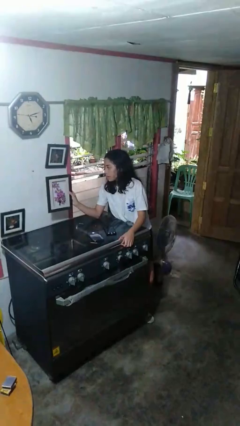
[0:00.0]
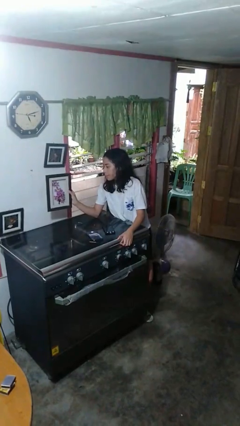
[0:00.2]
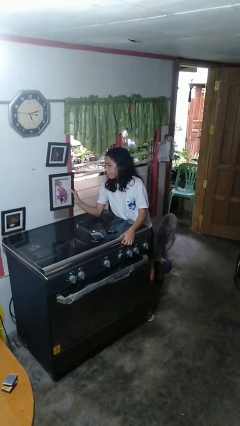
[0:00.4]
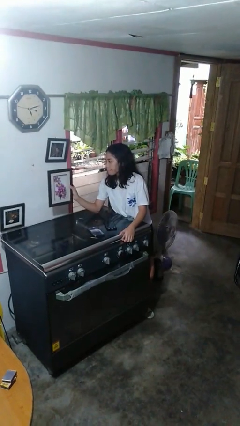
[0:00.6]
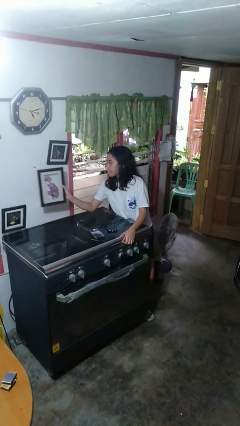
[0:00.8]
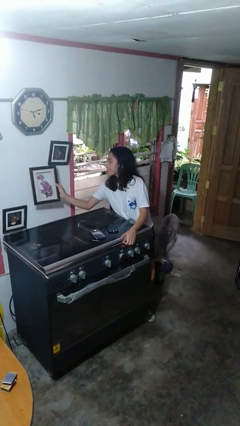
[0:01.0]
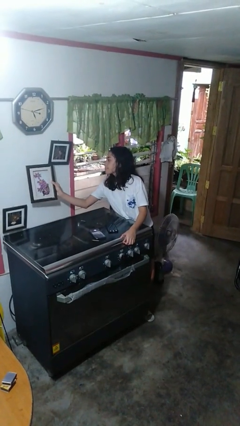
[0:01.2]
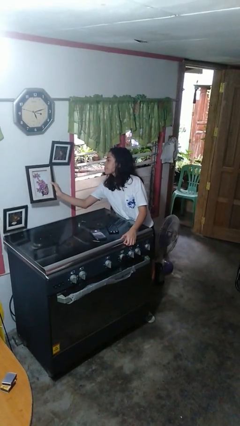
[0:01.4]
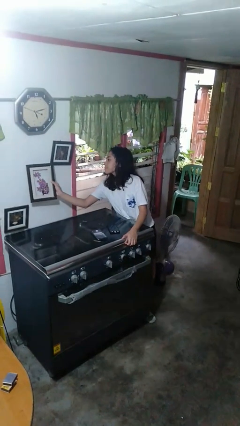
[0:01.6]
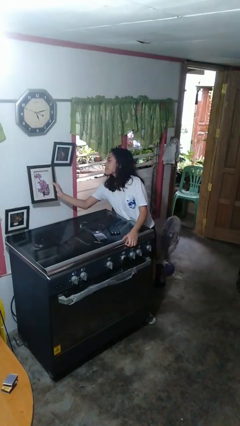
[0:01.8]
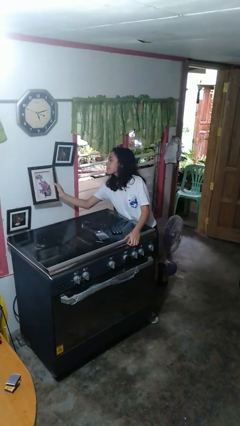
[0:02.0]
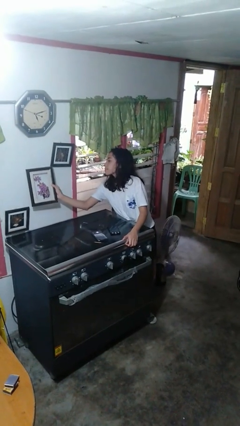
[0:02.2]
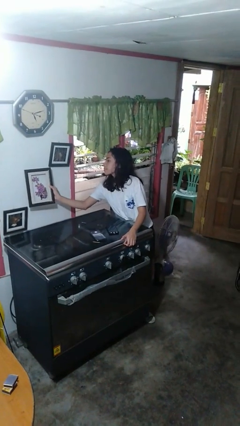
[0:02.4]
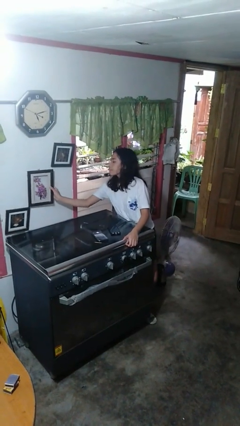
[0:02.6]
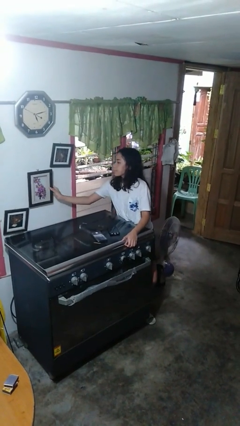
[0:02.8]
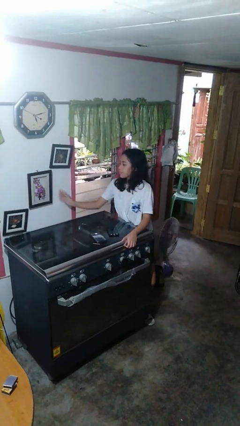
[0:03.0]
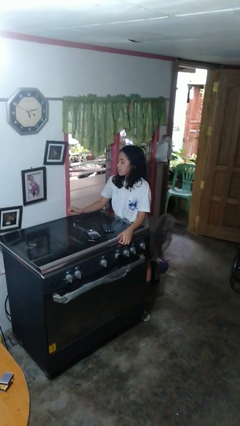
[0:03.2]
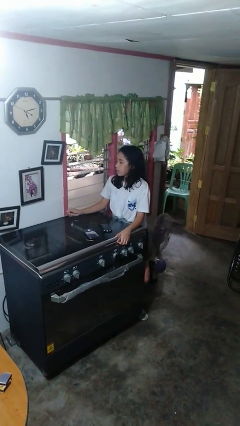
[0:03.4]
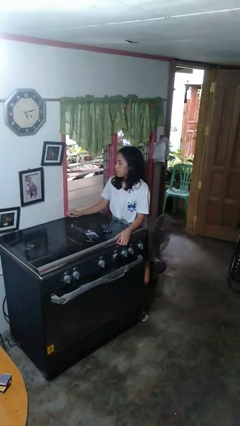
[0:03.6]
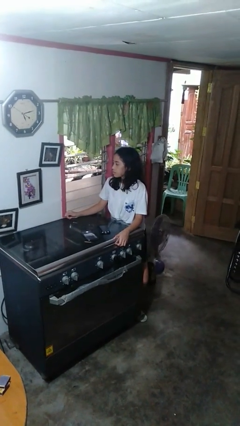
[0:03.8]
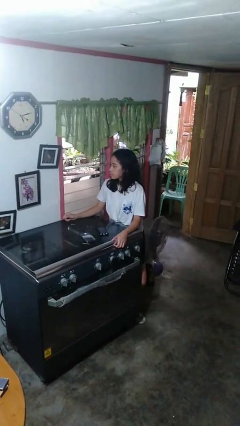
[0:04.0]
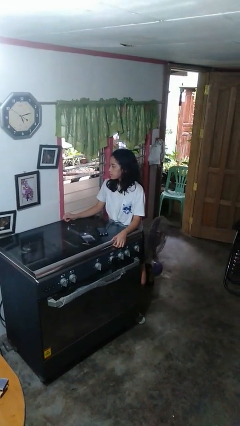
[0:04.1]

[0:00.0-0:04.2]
person puts up picture frame

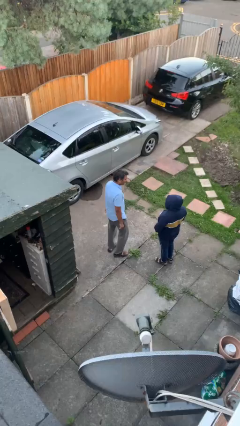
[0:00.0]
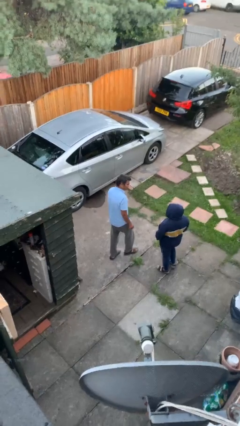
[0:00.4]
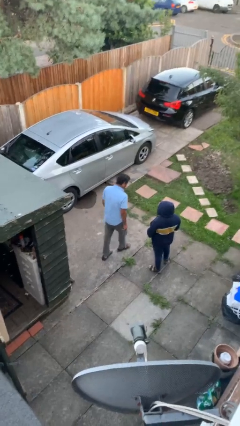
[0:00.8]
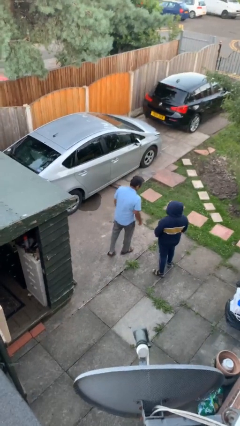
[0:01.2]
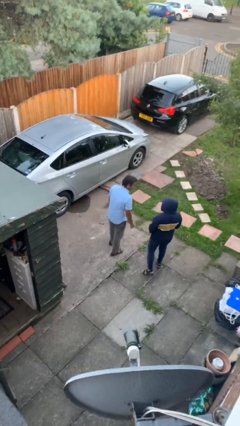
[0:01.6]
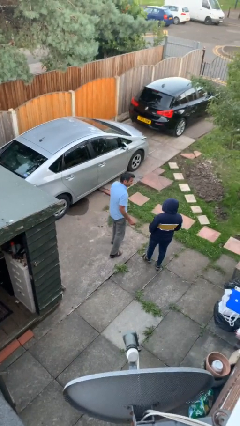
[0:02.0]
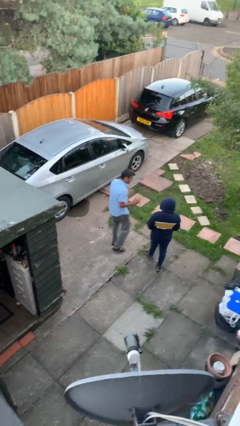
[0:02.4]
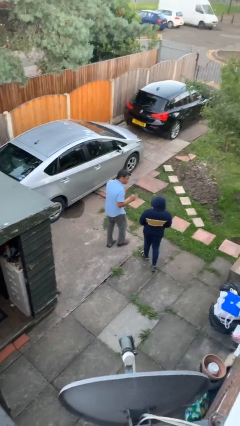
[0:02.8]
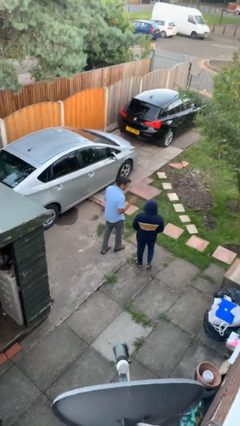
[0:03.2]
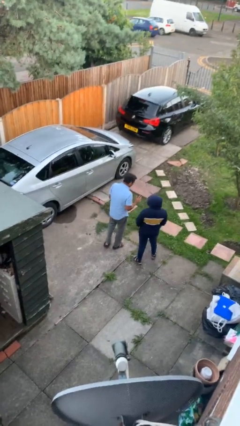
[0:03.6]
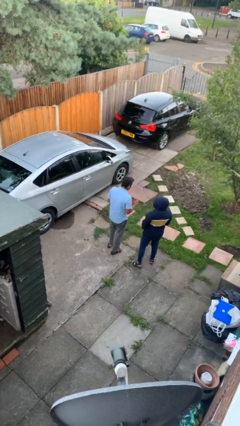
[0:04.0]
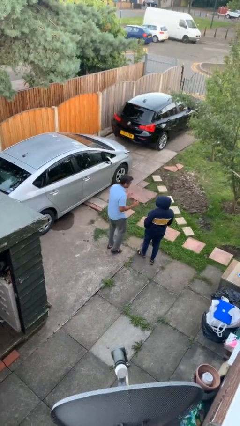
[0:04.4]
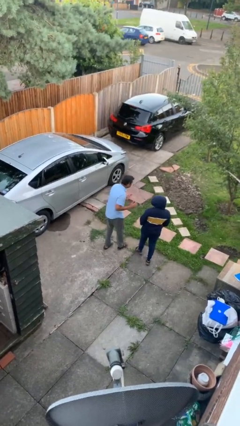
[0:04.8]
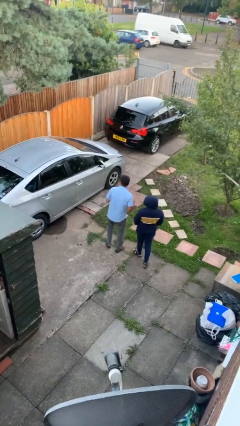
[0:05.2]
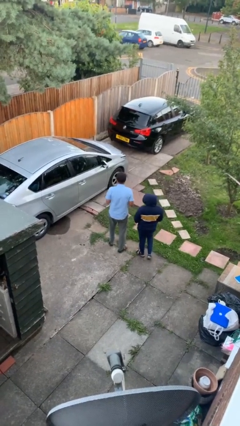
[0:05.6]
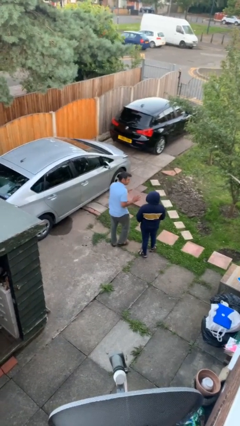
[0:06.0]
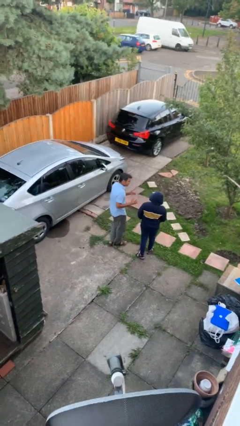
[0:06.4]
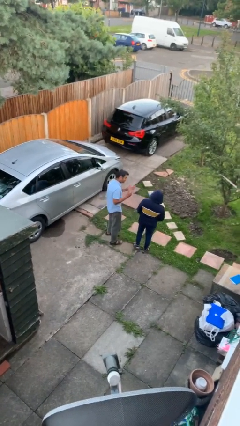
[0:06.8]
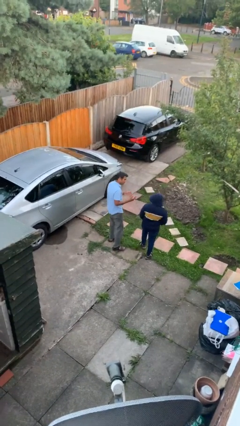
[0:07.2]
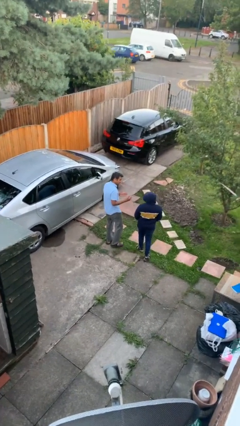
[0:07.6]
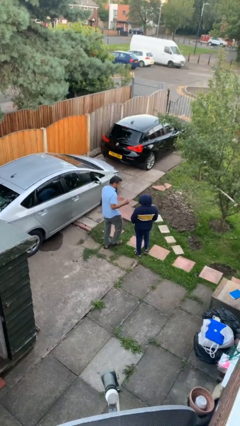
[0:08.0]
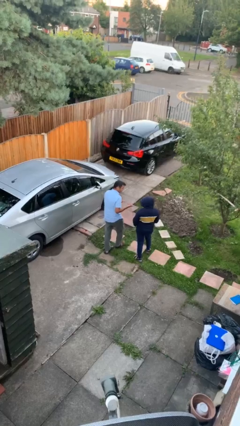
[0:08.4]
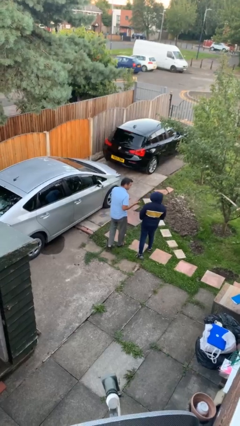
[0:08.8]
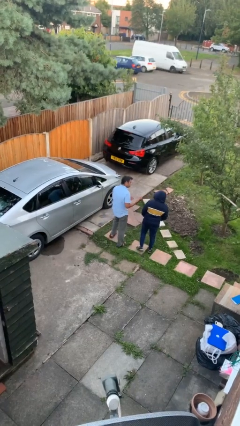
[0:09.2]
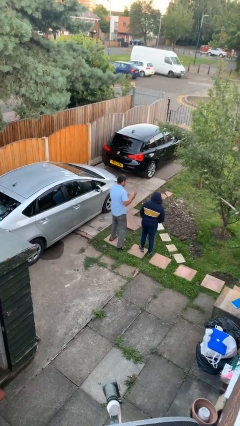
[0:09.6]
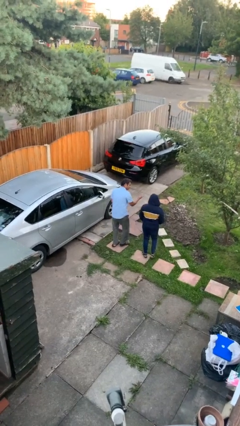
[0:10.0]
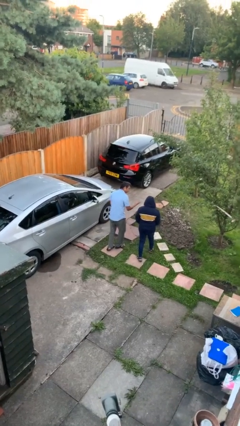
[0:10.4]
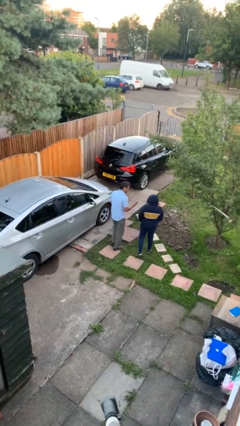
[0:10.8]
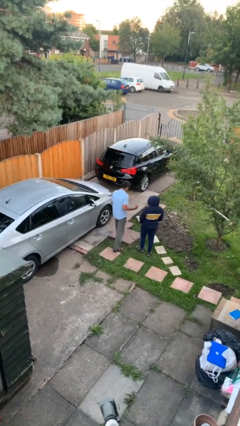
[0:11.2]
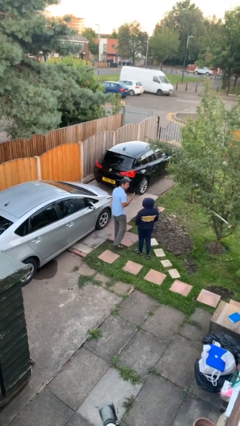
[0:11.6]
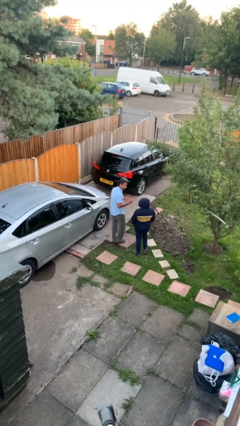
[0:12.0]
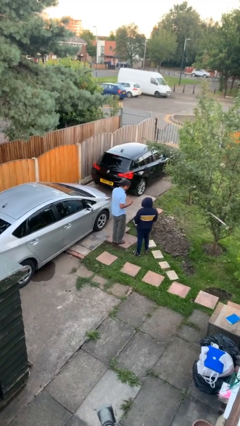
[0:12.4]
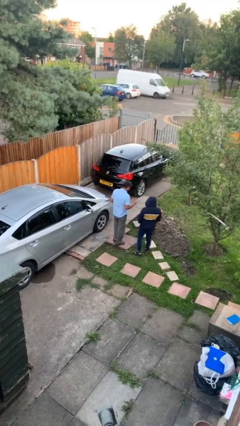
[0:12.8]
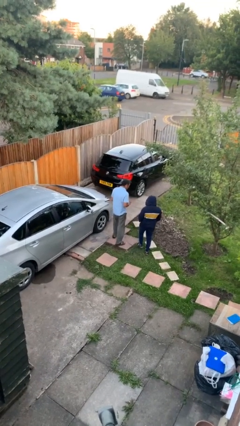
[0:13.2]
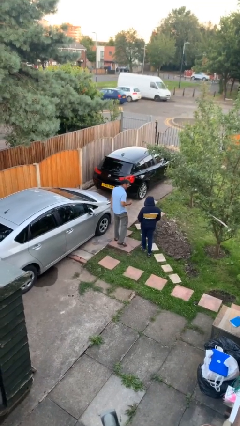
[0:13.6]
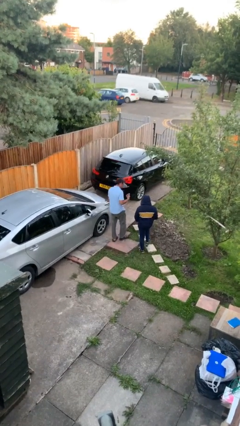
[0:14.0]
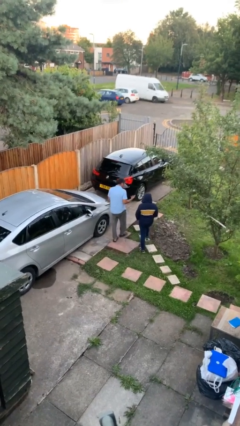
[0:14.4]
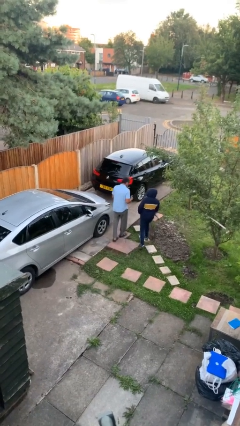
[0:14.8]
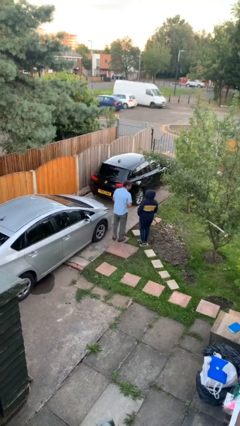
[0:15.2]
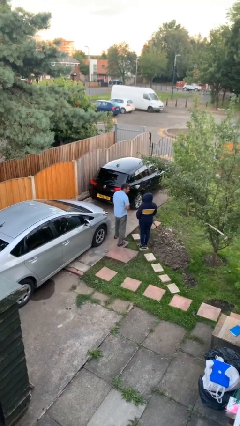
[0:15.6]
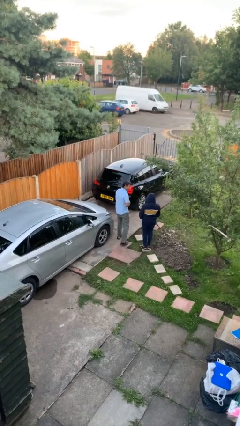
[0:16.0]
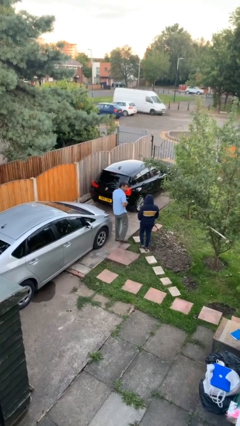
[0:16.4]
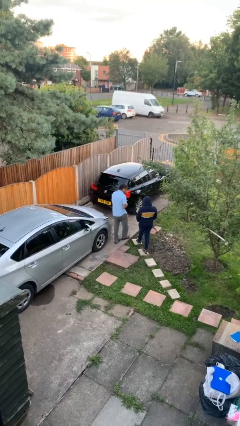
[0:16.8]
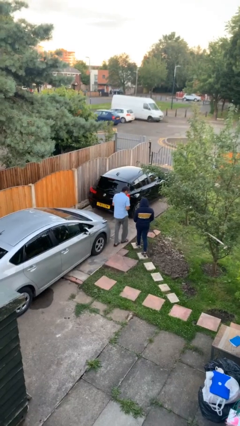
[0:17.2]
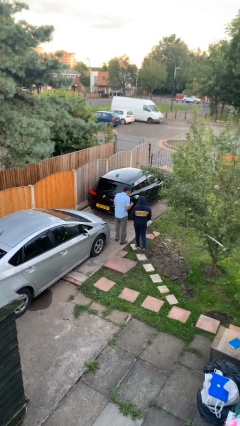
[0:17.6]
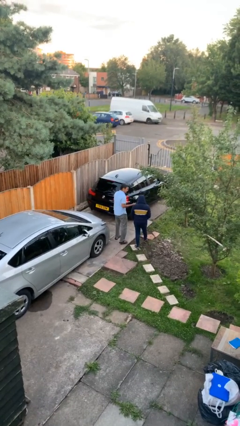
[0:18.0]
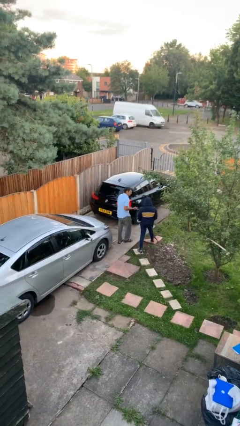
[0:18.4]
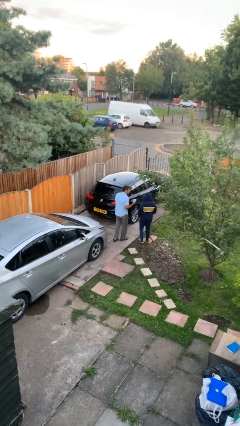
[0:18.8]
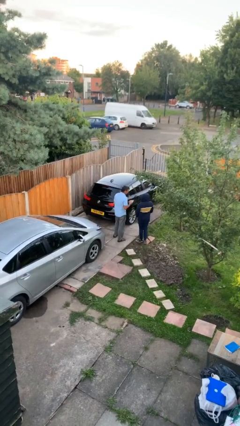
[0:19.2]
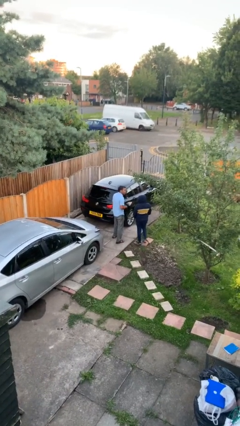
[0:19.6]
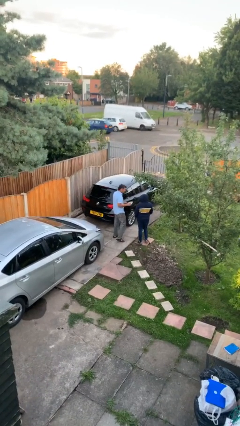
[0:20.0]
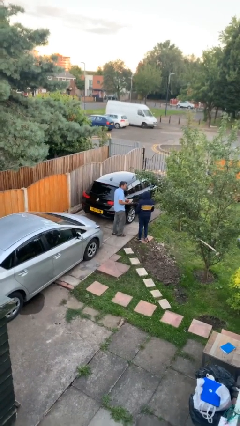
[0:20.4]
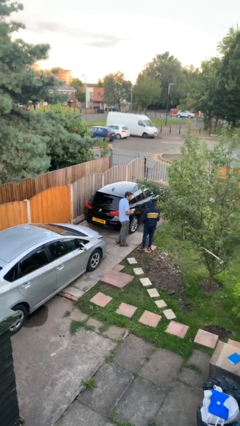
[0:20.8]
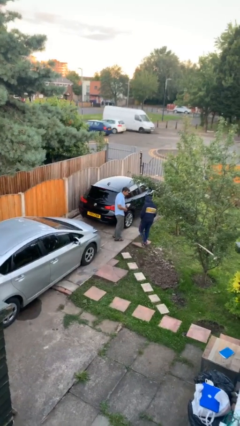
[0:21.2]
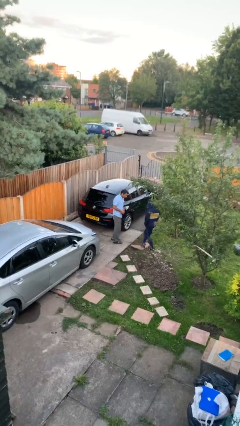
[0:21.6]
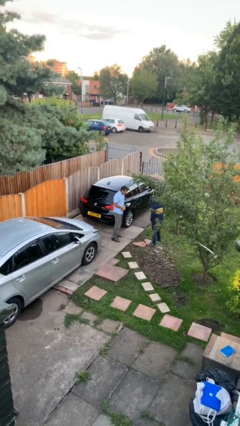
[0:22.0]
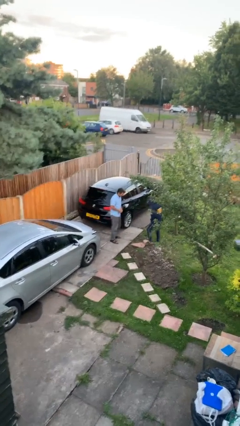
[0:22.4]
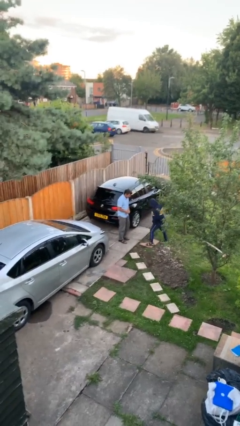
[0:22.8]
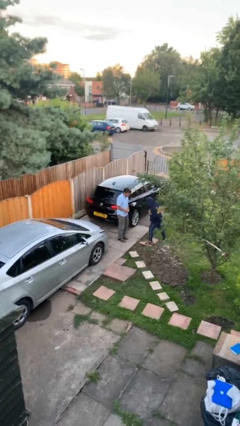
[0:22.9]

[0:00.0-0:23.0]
person talks to person

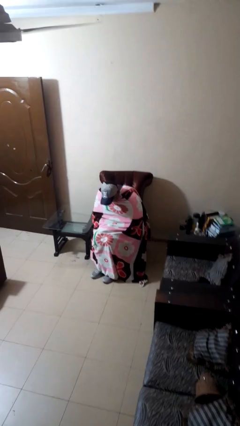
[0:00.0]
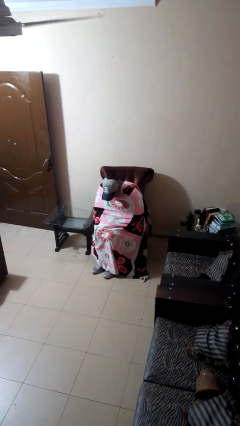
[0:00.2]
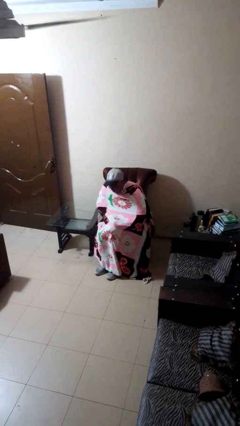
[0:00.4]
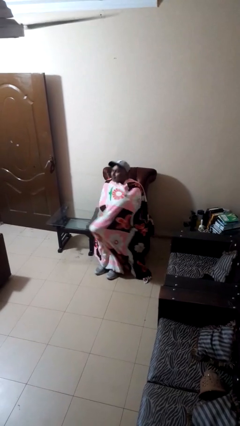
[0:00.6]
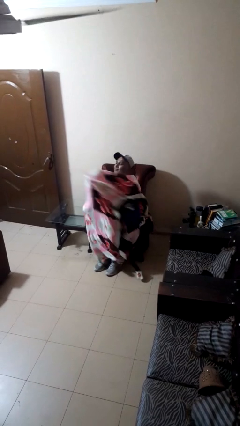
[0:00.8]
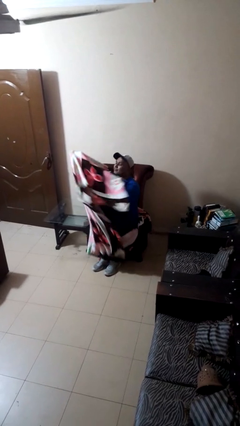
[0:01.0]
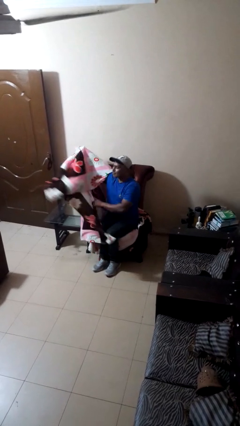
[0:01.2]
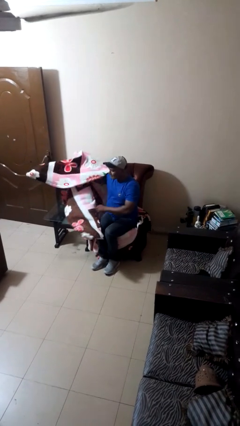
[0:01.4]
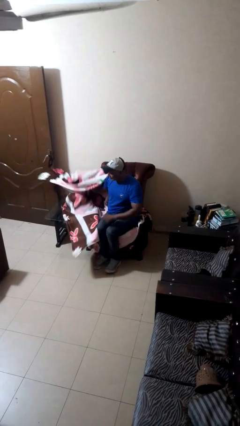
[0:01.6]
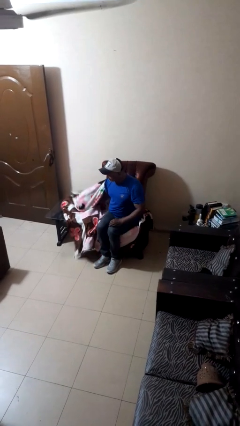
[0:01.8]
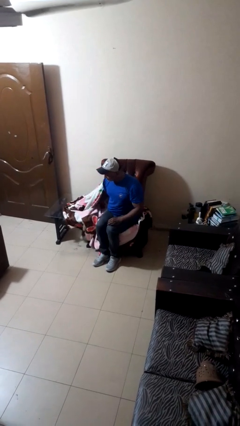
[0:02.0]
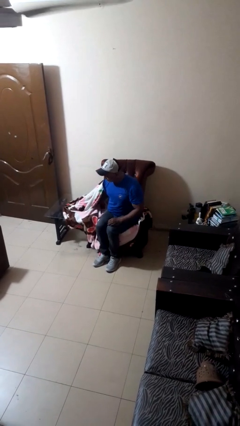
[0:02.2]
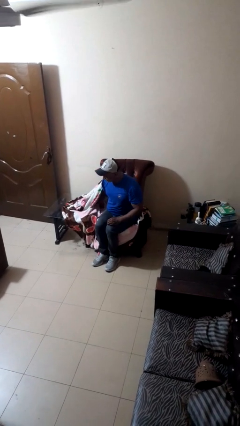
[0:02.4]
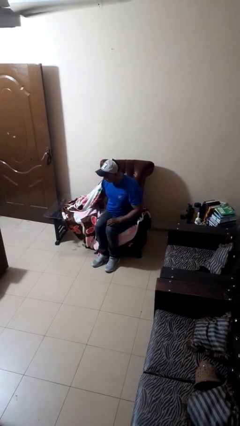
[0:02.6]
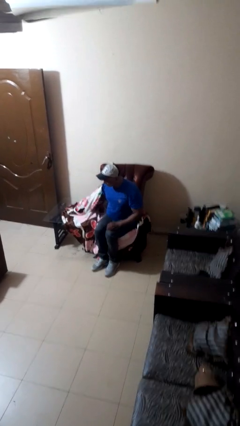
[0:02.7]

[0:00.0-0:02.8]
person uncovers with blanket
